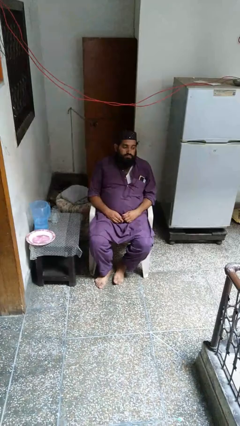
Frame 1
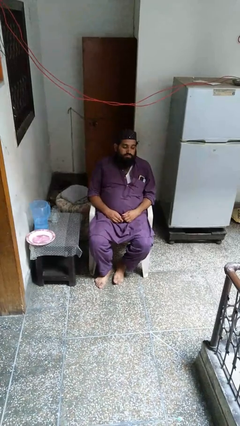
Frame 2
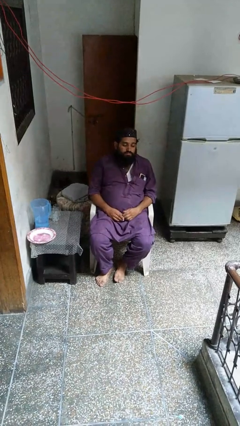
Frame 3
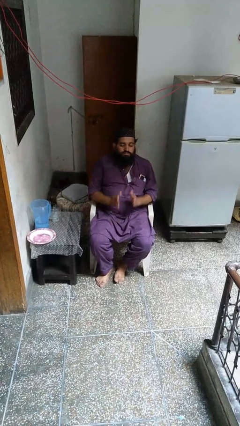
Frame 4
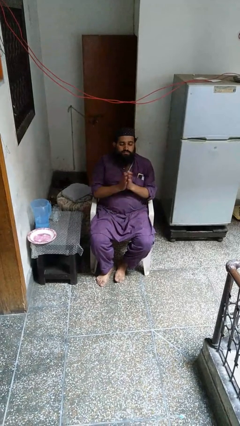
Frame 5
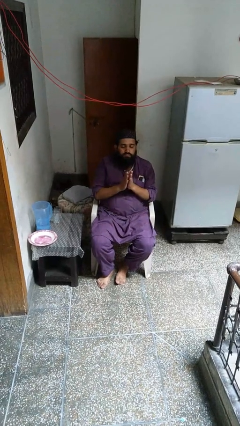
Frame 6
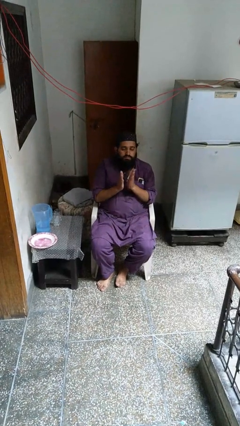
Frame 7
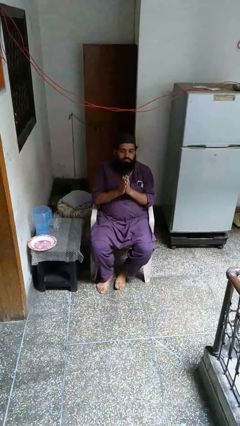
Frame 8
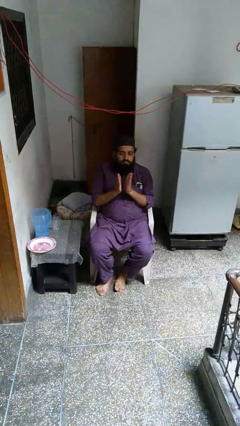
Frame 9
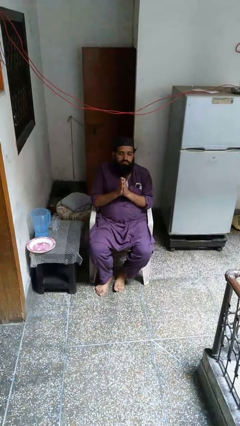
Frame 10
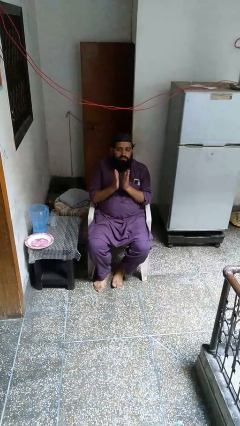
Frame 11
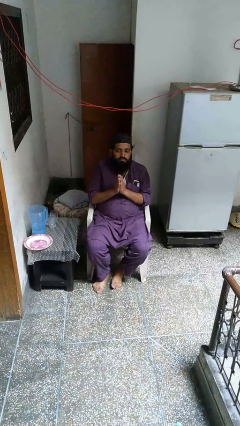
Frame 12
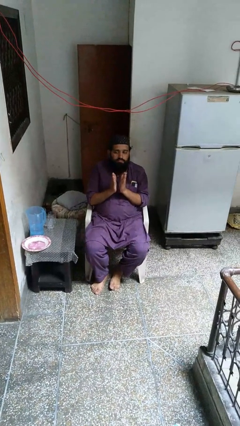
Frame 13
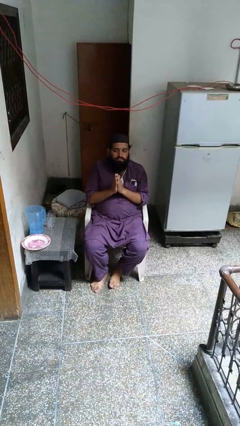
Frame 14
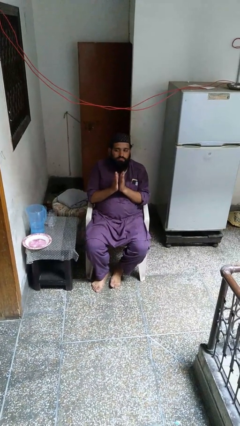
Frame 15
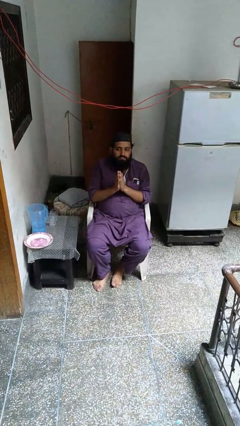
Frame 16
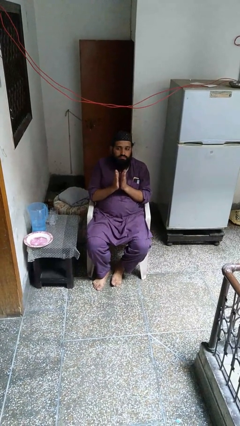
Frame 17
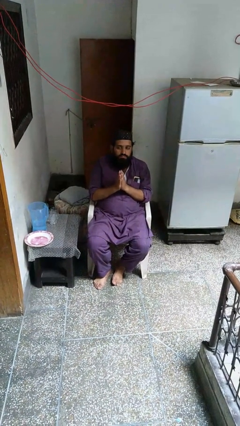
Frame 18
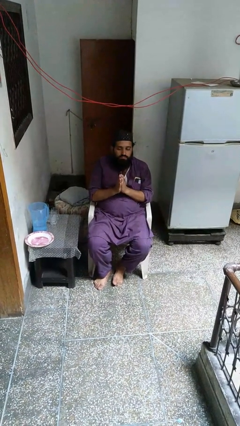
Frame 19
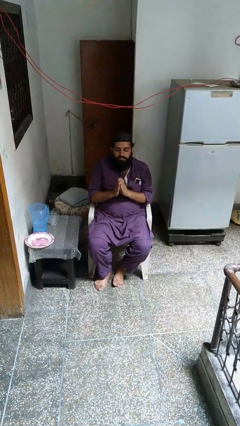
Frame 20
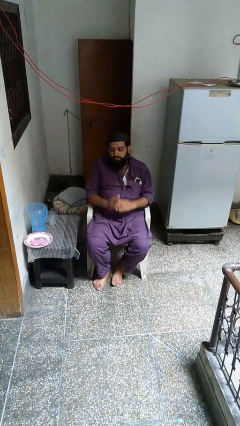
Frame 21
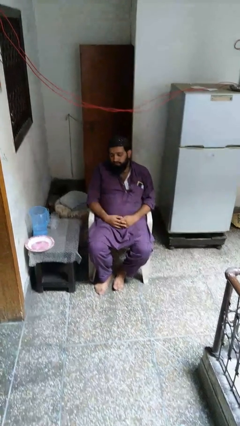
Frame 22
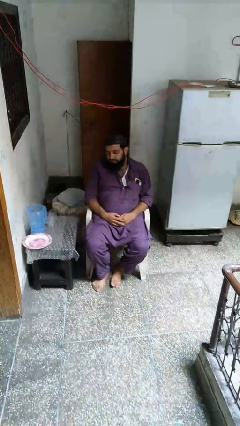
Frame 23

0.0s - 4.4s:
person claps hands

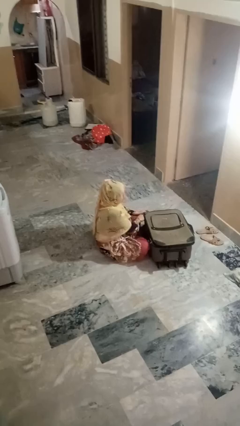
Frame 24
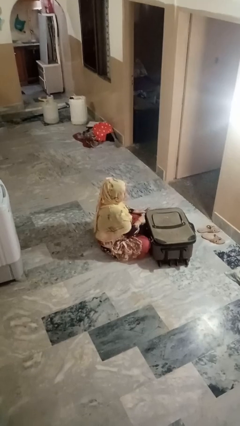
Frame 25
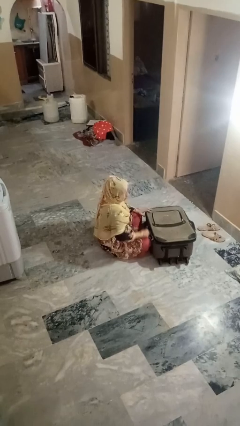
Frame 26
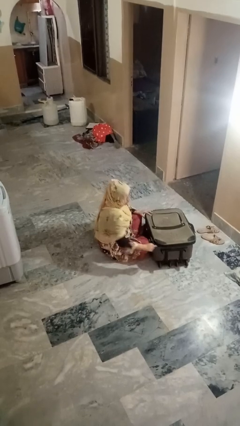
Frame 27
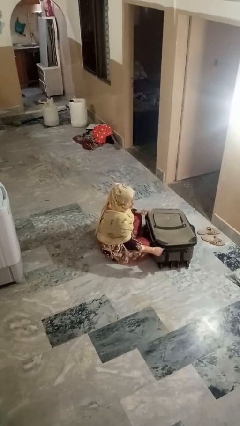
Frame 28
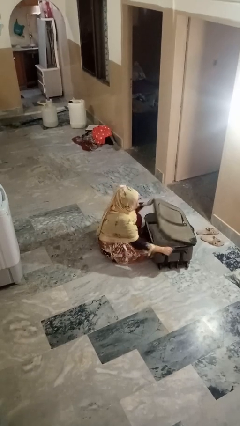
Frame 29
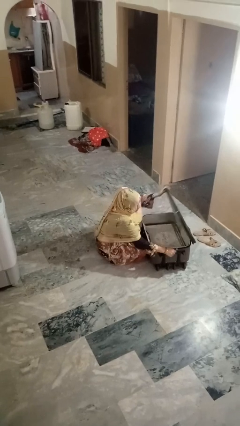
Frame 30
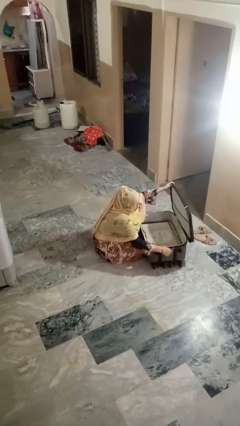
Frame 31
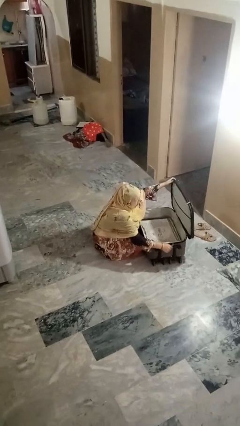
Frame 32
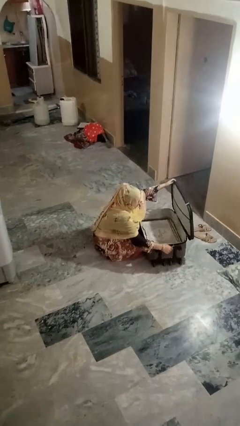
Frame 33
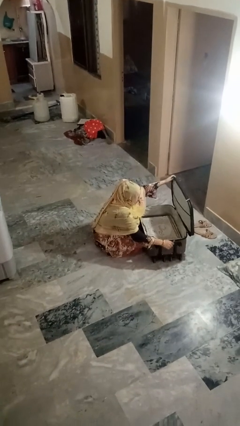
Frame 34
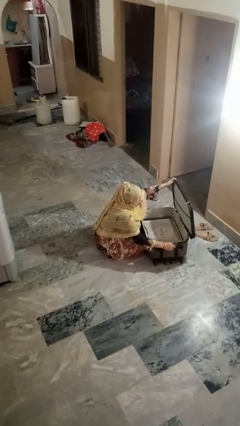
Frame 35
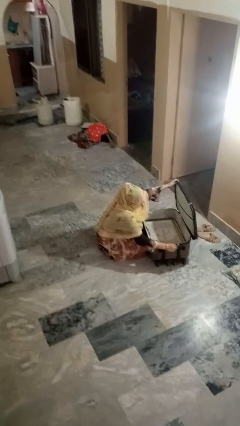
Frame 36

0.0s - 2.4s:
person opens suitcase

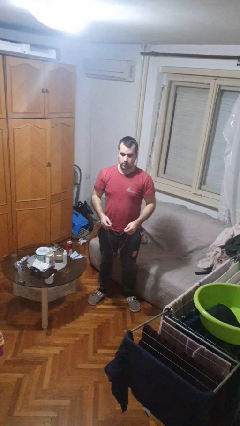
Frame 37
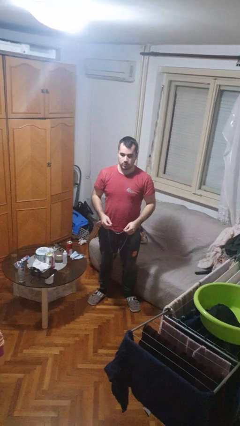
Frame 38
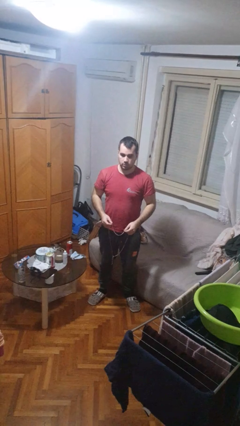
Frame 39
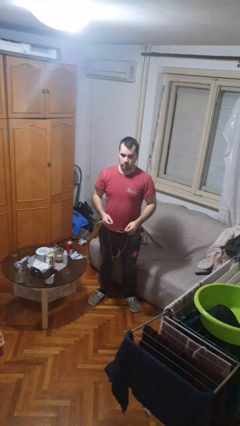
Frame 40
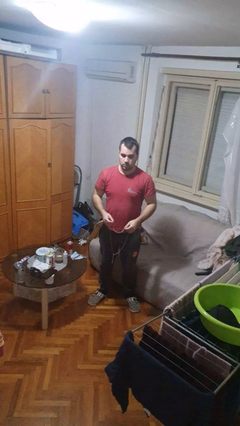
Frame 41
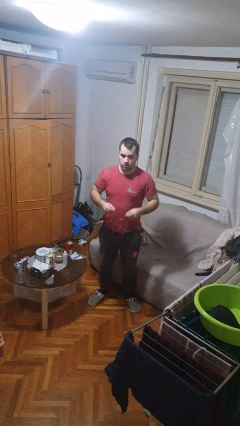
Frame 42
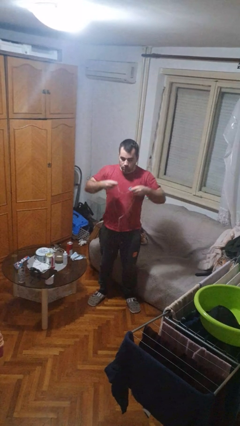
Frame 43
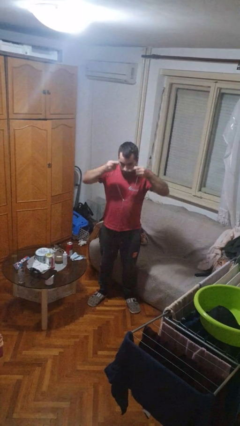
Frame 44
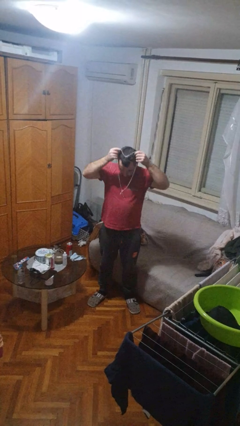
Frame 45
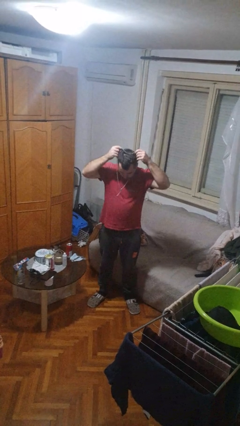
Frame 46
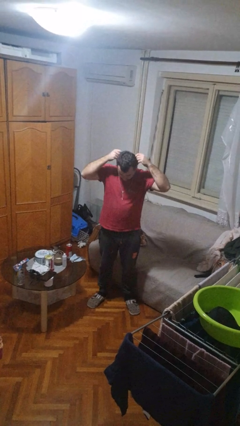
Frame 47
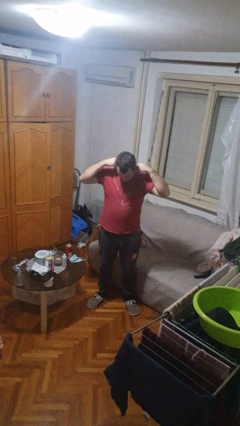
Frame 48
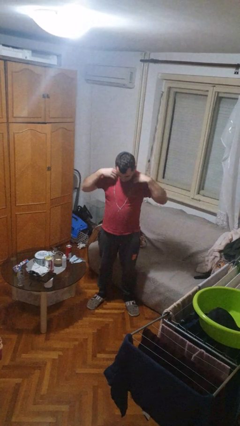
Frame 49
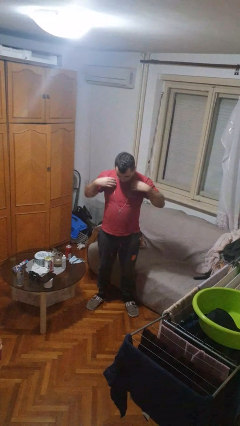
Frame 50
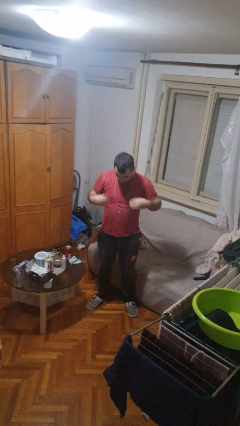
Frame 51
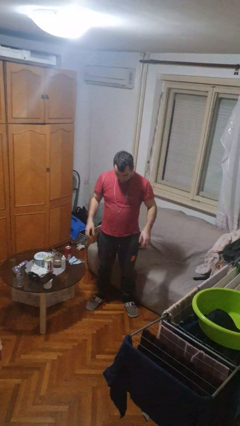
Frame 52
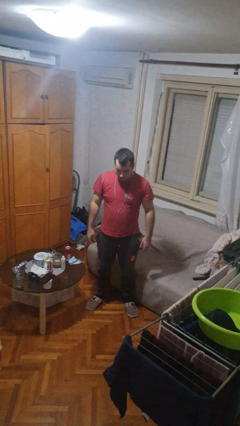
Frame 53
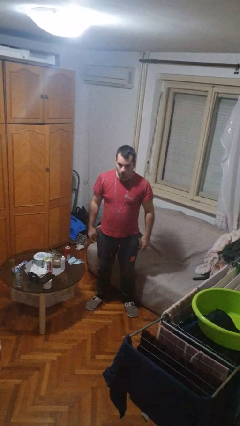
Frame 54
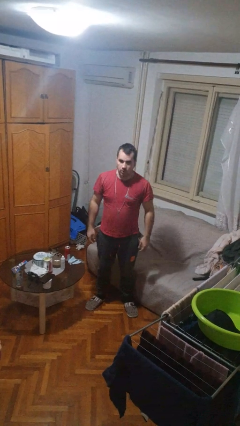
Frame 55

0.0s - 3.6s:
person puts on necklace

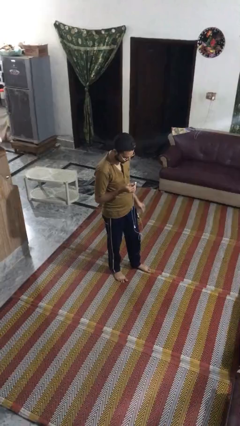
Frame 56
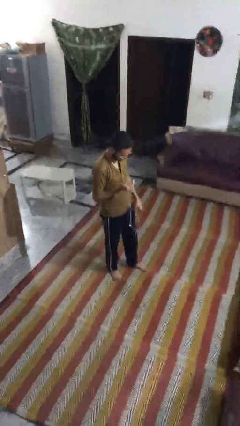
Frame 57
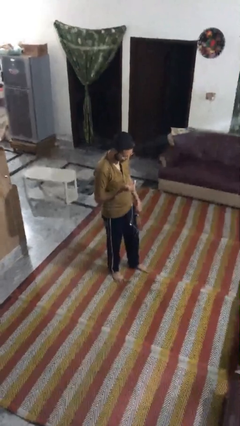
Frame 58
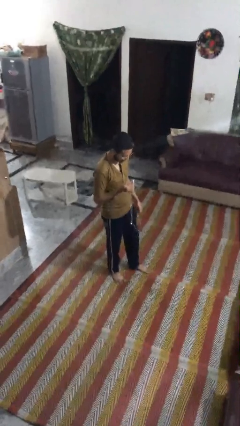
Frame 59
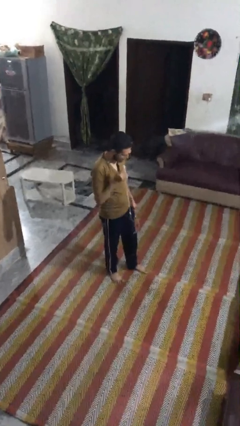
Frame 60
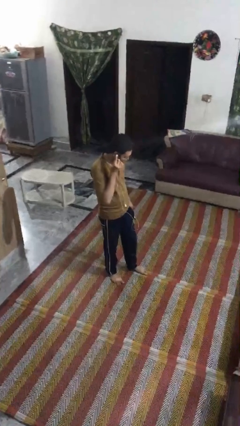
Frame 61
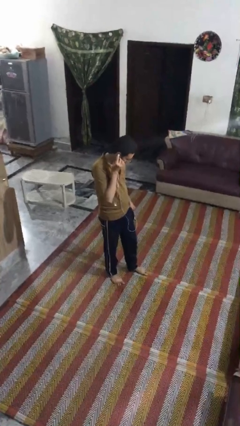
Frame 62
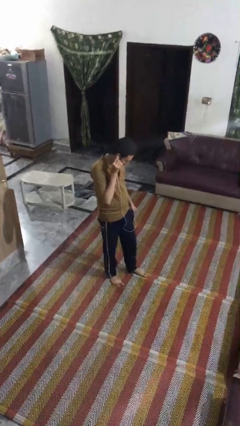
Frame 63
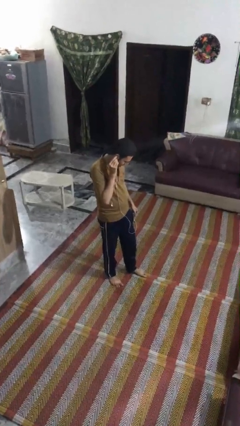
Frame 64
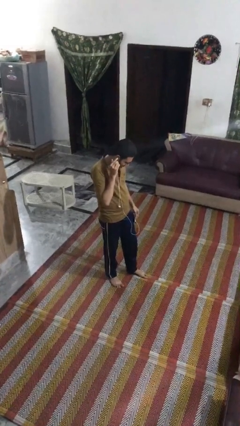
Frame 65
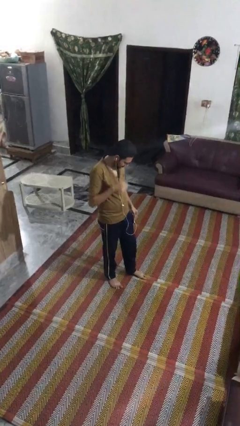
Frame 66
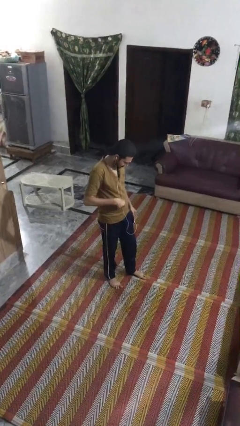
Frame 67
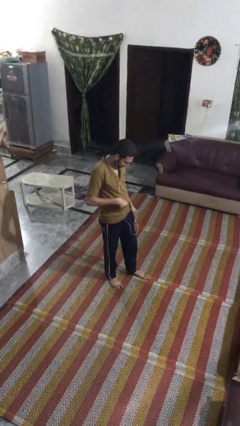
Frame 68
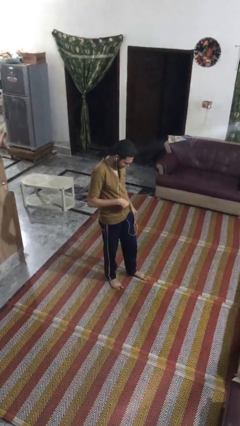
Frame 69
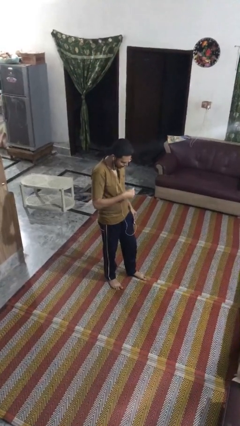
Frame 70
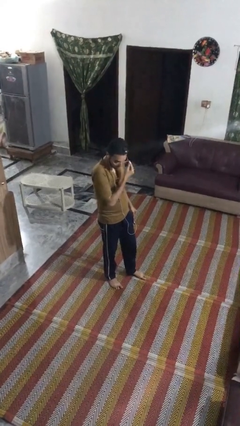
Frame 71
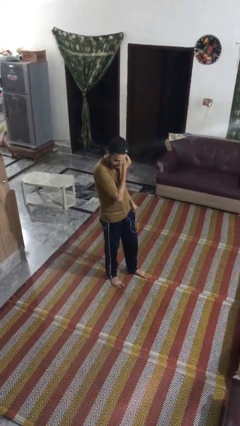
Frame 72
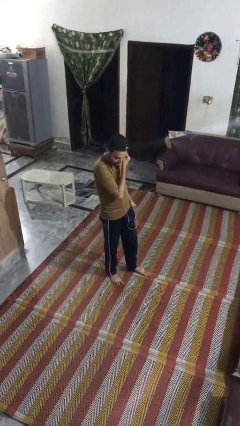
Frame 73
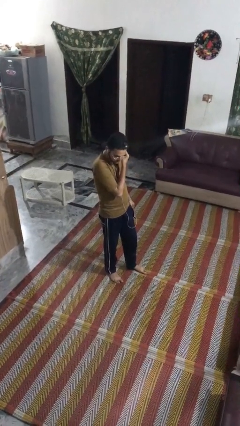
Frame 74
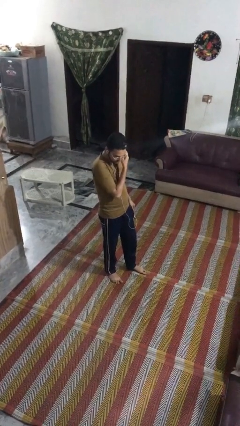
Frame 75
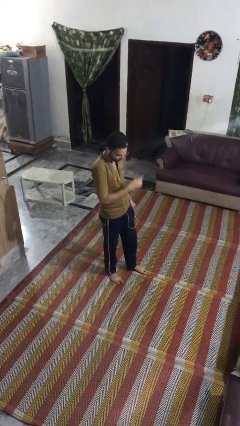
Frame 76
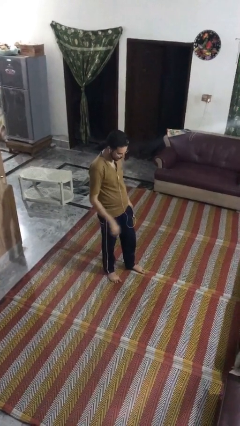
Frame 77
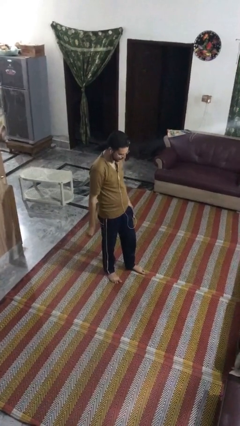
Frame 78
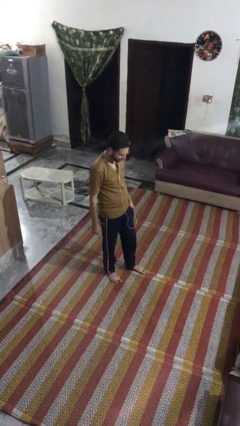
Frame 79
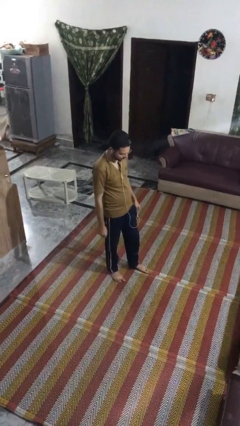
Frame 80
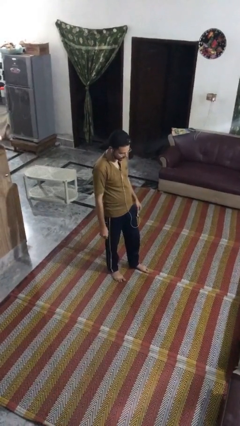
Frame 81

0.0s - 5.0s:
person puts on headphones

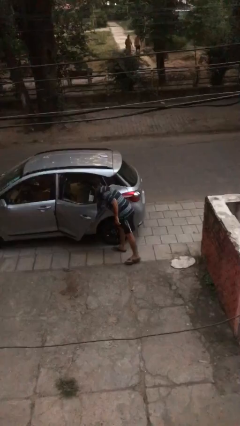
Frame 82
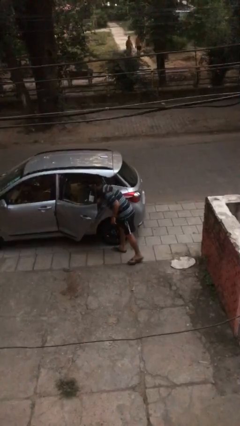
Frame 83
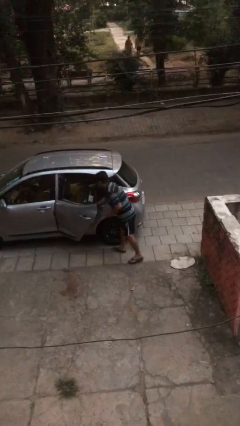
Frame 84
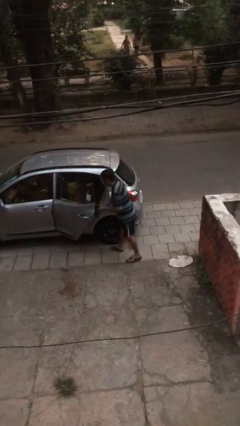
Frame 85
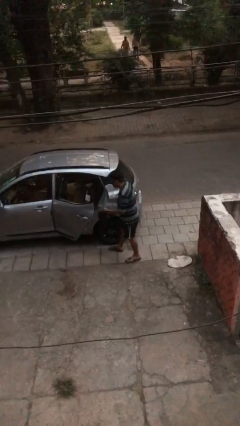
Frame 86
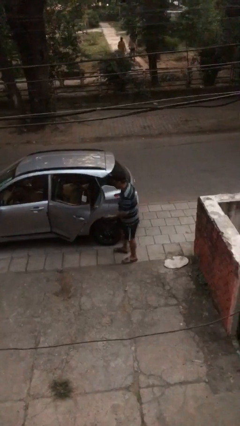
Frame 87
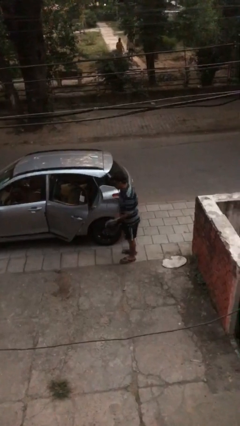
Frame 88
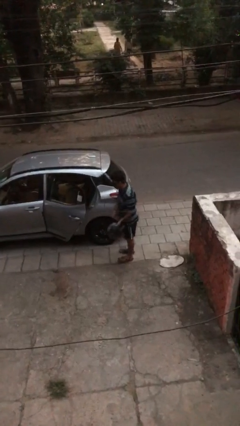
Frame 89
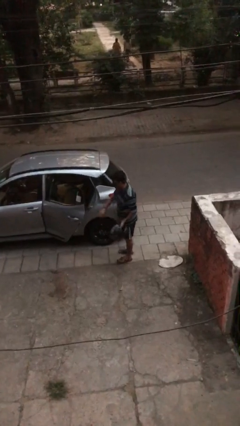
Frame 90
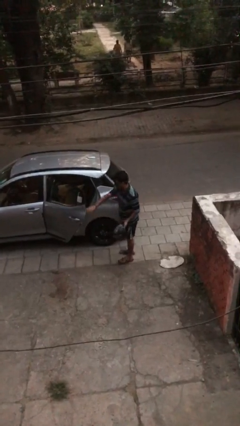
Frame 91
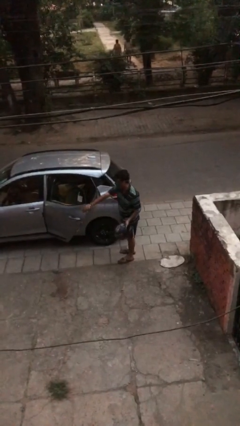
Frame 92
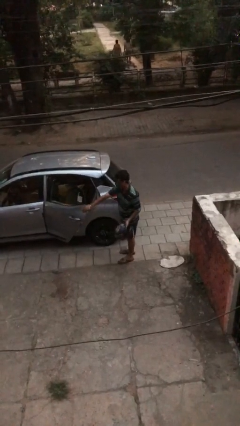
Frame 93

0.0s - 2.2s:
person unloads car
